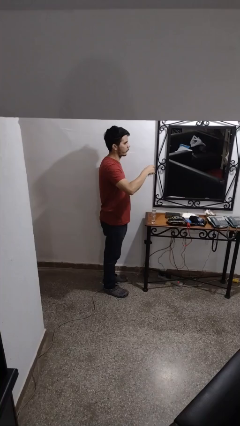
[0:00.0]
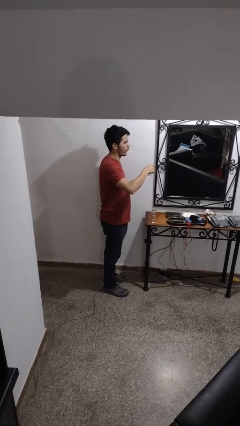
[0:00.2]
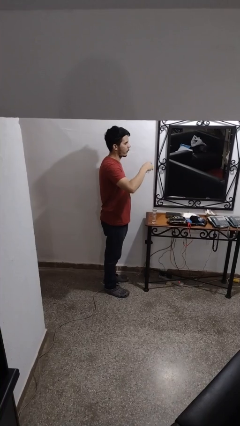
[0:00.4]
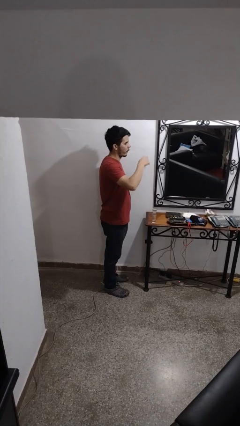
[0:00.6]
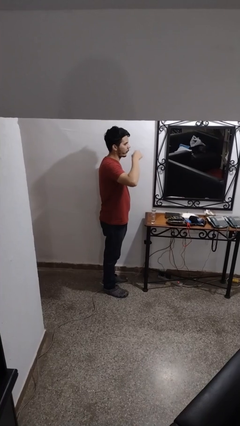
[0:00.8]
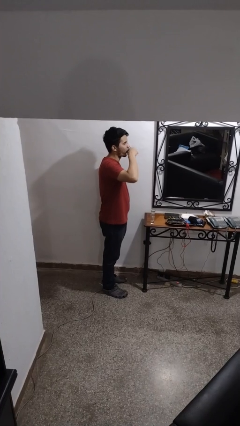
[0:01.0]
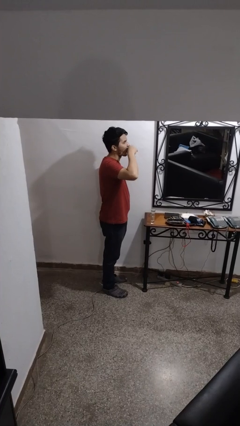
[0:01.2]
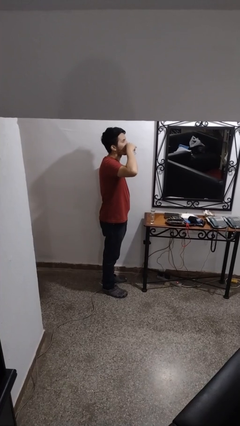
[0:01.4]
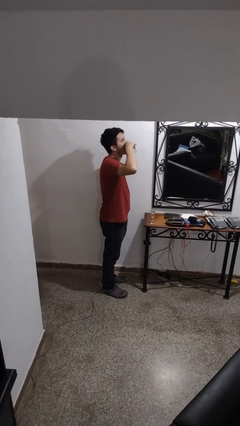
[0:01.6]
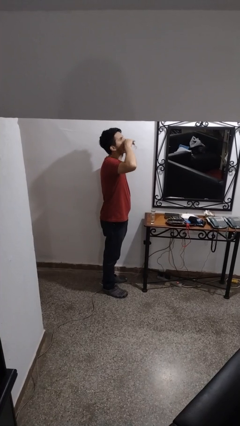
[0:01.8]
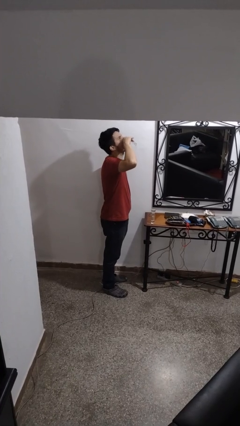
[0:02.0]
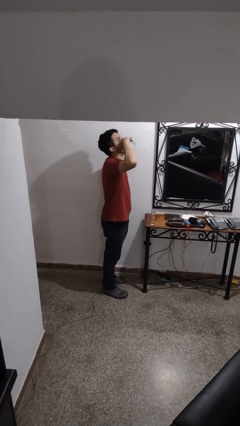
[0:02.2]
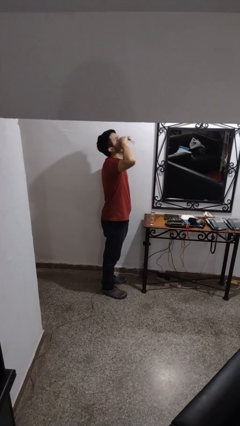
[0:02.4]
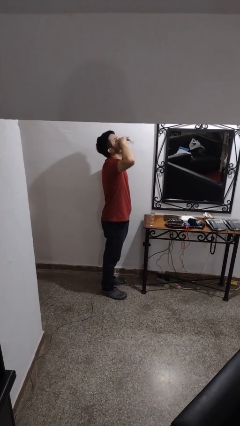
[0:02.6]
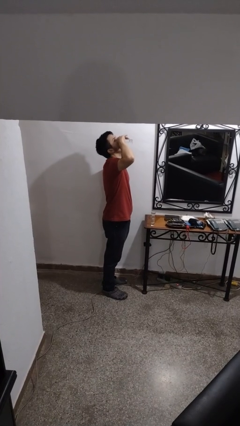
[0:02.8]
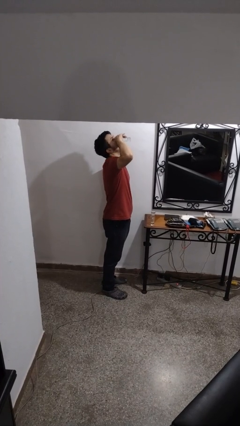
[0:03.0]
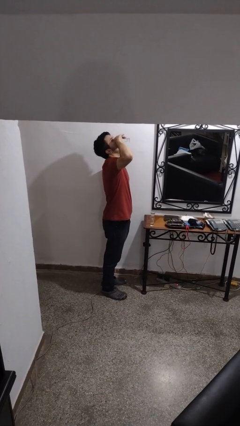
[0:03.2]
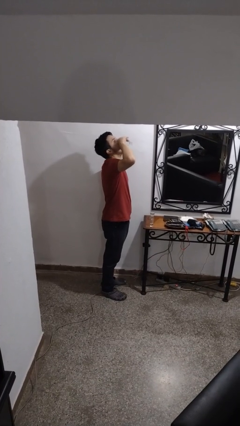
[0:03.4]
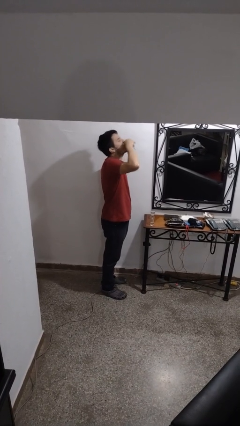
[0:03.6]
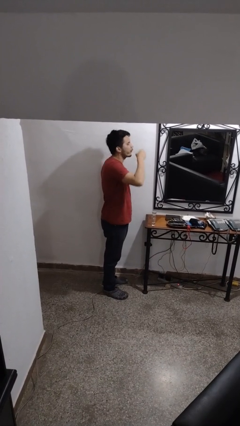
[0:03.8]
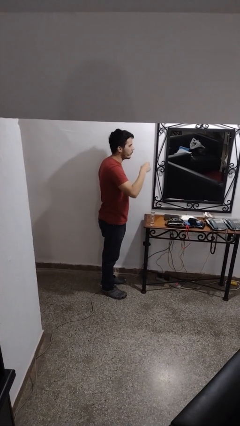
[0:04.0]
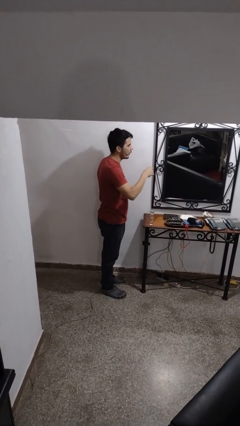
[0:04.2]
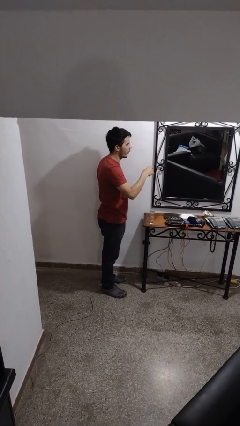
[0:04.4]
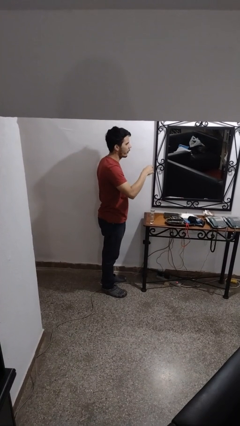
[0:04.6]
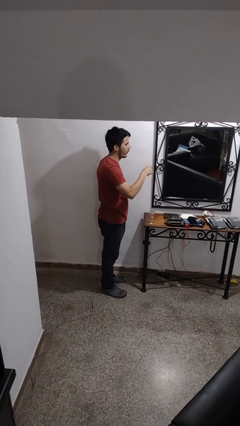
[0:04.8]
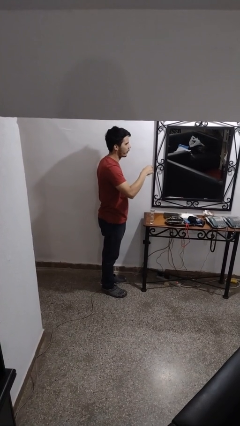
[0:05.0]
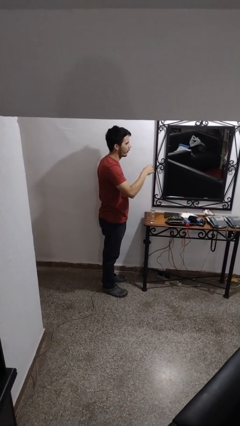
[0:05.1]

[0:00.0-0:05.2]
person drinks from shotglass

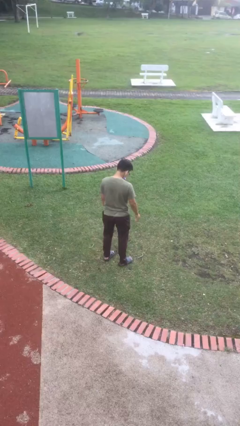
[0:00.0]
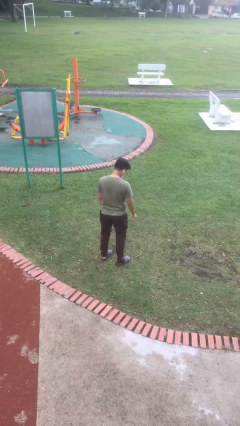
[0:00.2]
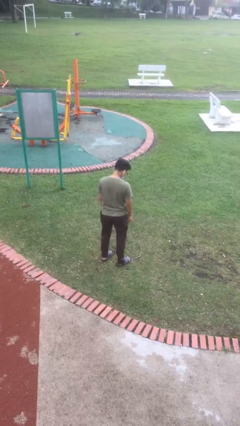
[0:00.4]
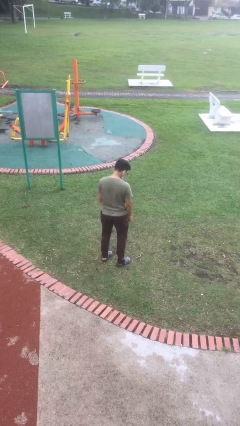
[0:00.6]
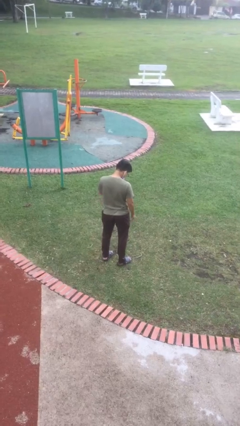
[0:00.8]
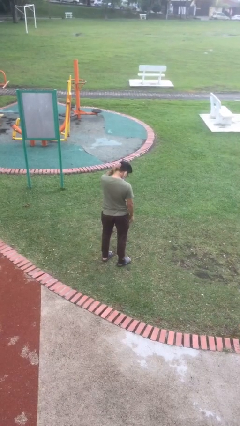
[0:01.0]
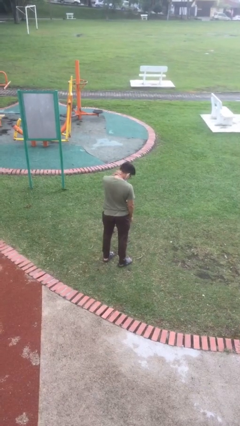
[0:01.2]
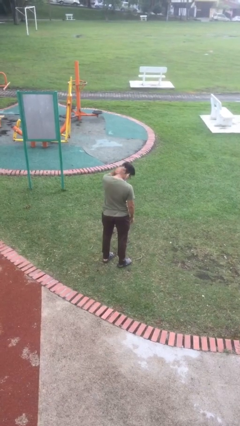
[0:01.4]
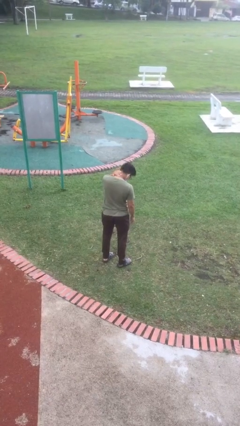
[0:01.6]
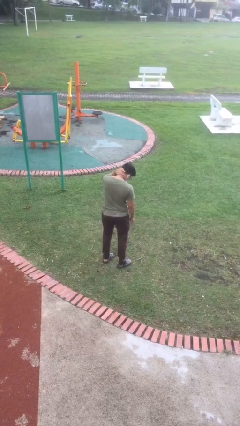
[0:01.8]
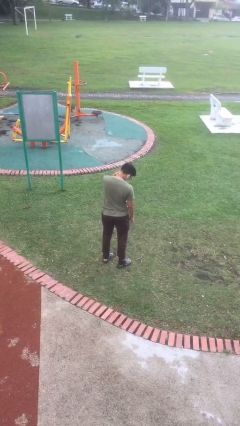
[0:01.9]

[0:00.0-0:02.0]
person rubs neck

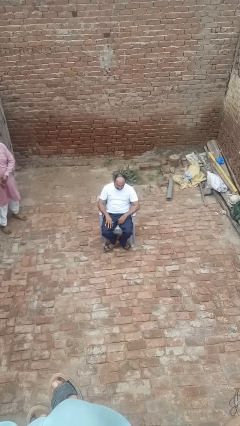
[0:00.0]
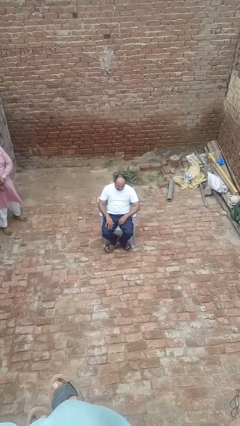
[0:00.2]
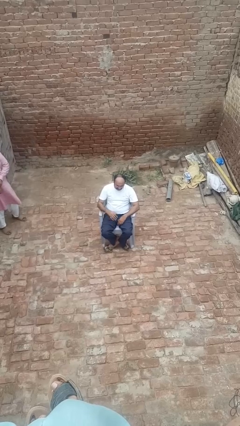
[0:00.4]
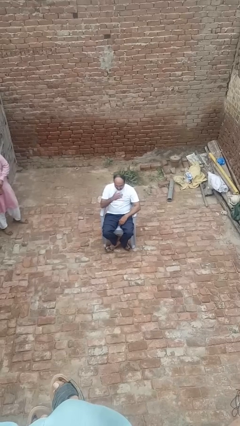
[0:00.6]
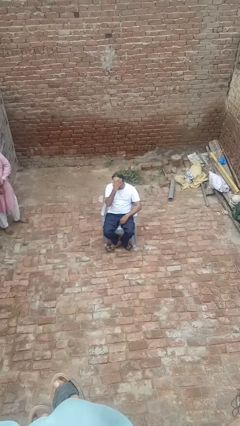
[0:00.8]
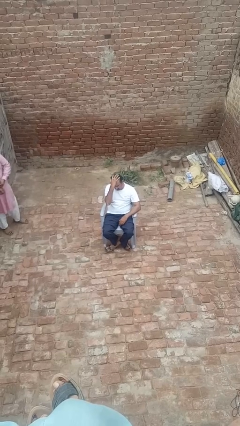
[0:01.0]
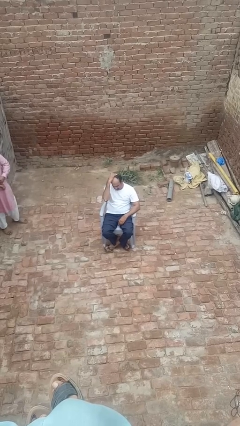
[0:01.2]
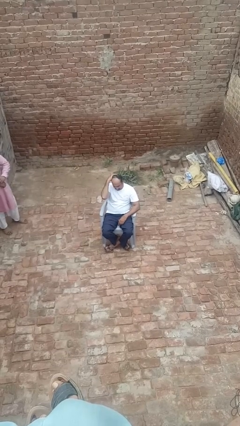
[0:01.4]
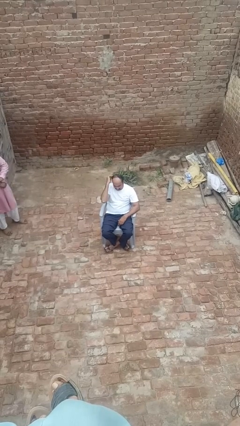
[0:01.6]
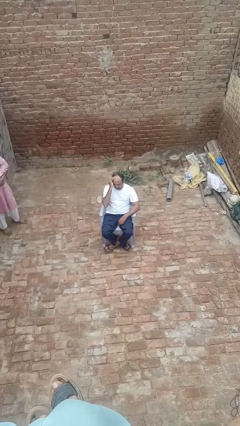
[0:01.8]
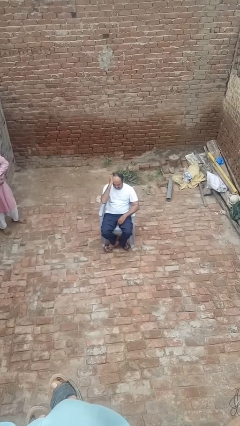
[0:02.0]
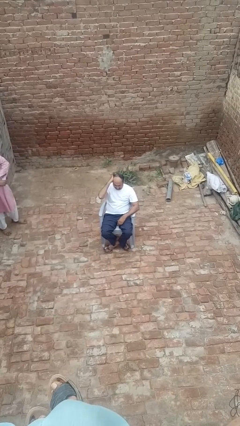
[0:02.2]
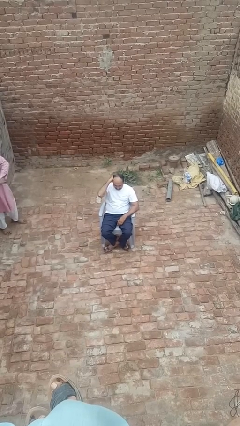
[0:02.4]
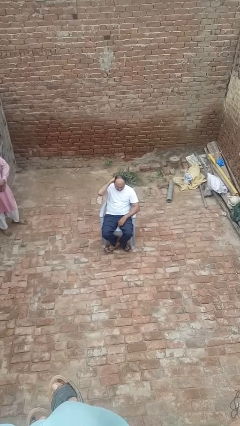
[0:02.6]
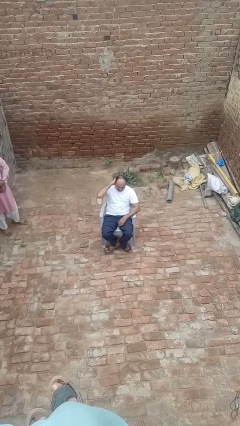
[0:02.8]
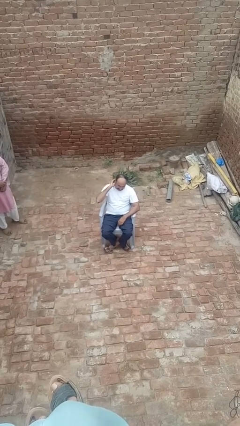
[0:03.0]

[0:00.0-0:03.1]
person strokes hair

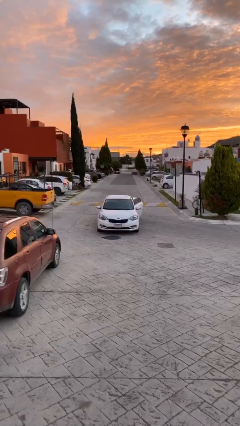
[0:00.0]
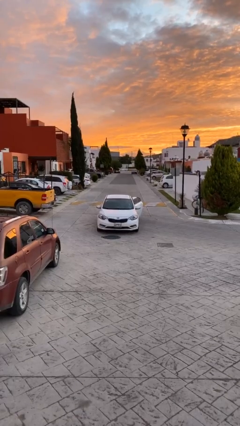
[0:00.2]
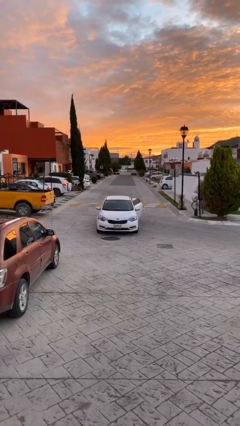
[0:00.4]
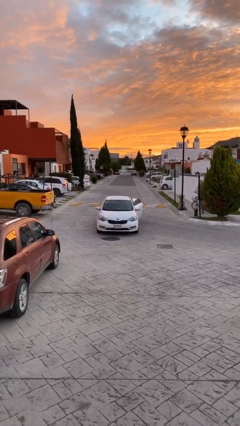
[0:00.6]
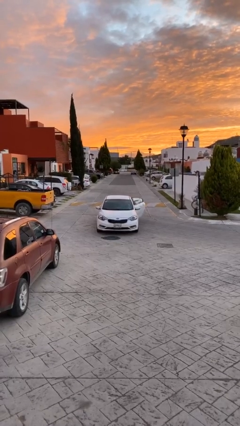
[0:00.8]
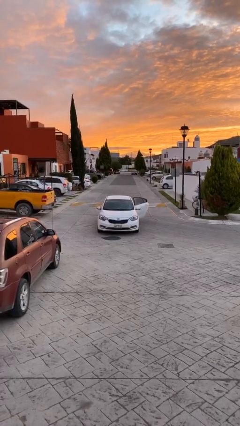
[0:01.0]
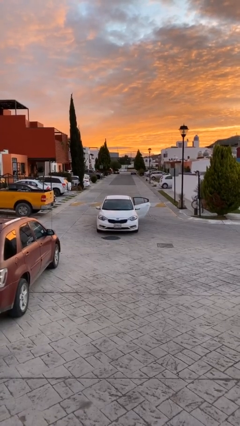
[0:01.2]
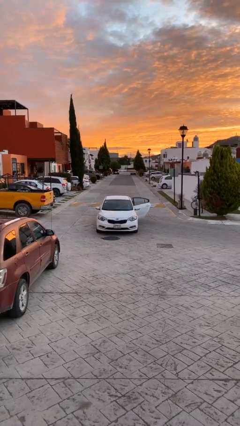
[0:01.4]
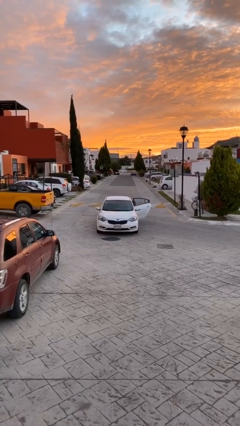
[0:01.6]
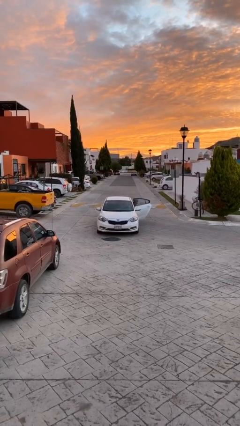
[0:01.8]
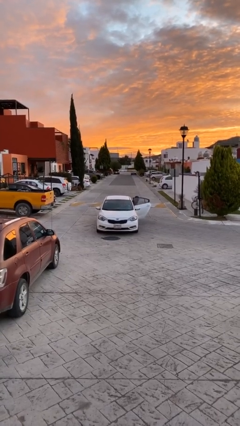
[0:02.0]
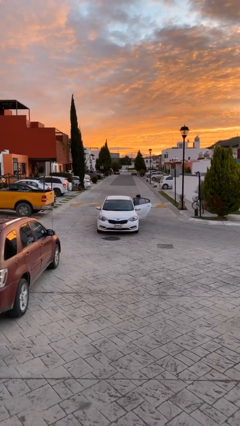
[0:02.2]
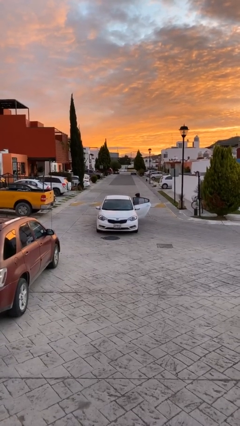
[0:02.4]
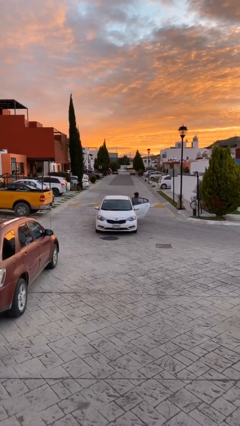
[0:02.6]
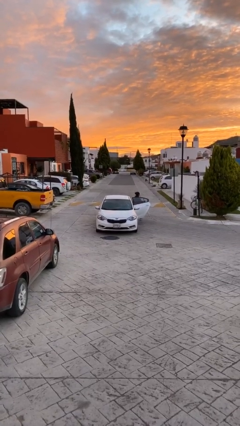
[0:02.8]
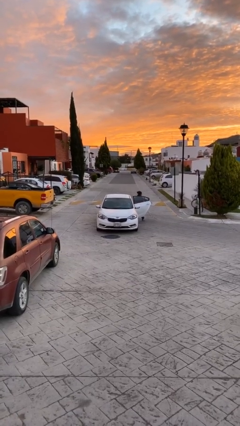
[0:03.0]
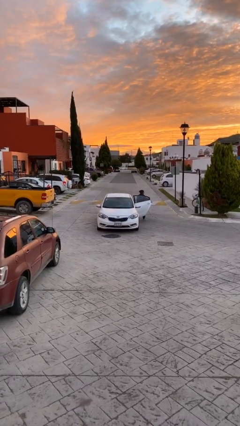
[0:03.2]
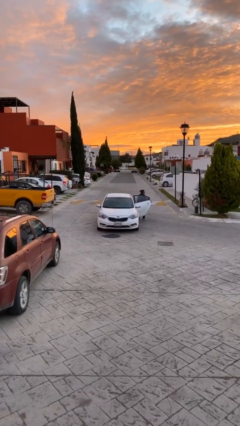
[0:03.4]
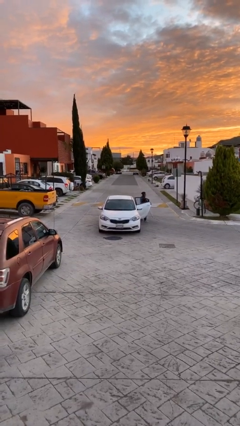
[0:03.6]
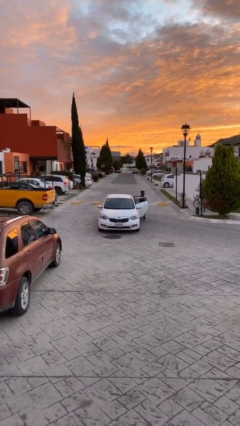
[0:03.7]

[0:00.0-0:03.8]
car drops off person

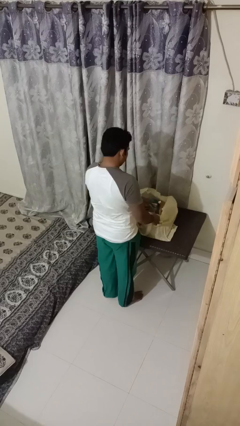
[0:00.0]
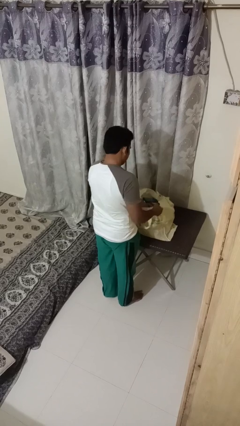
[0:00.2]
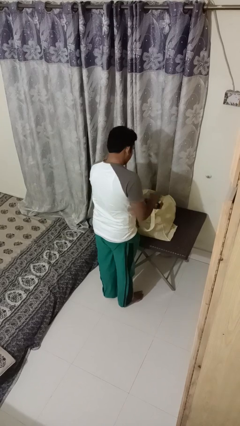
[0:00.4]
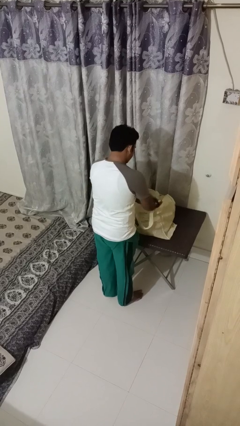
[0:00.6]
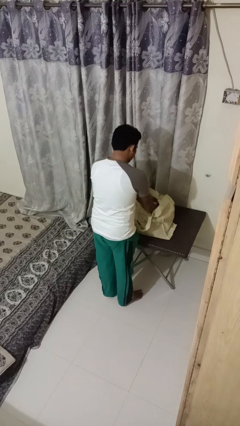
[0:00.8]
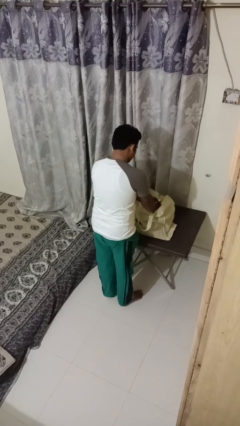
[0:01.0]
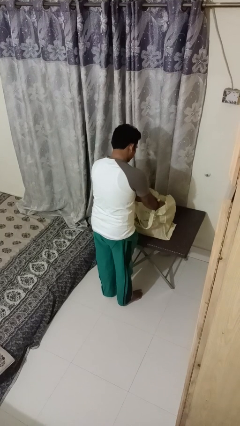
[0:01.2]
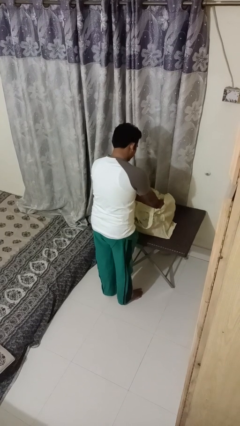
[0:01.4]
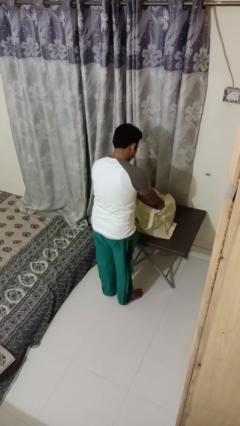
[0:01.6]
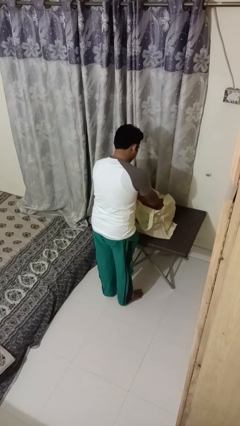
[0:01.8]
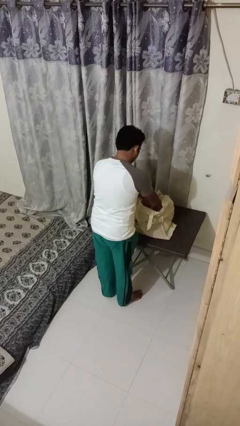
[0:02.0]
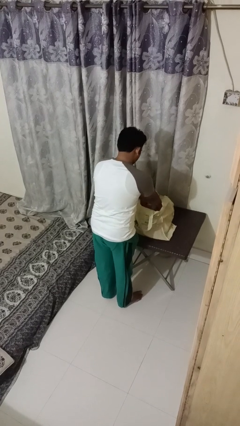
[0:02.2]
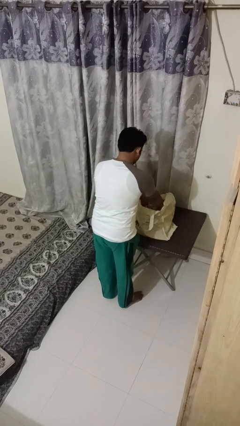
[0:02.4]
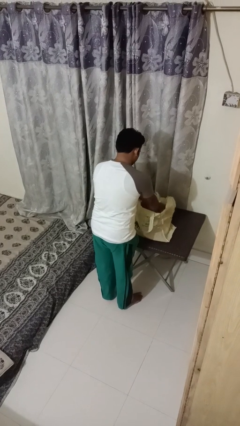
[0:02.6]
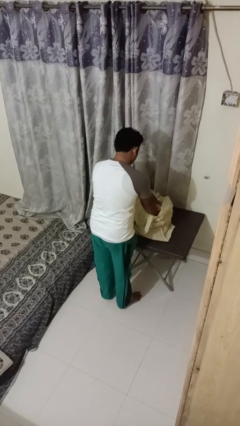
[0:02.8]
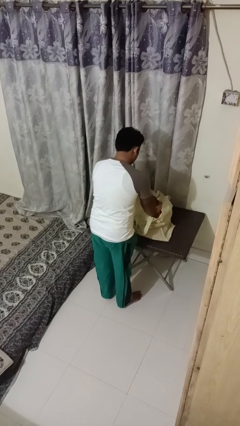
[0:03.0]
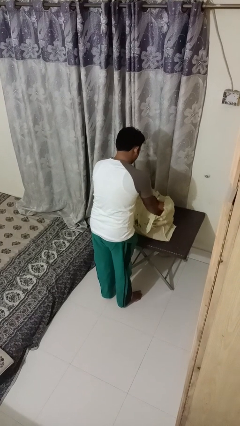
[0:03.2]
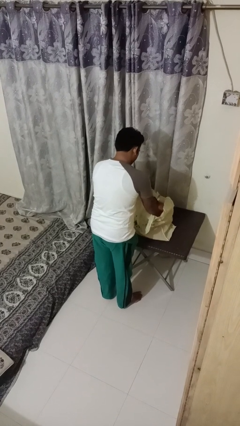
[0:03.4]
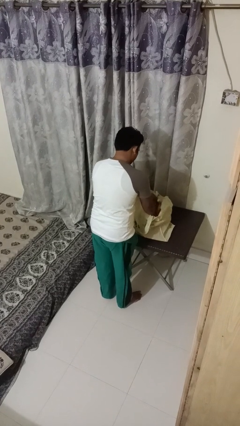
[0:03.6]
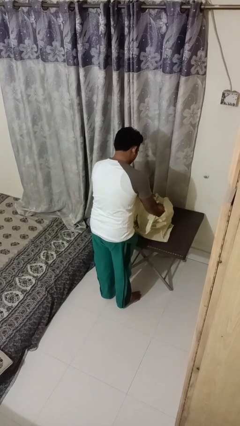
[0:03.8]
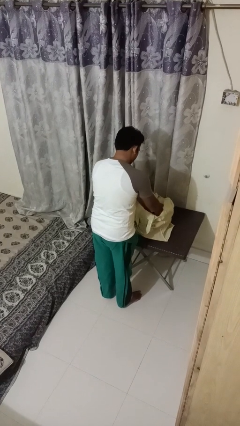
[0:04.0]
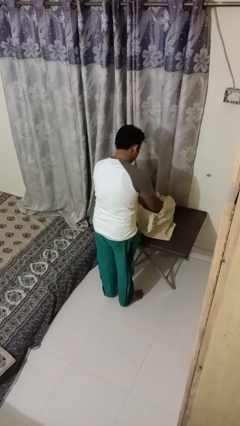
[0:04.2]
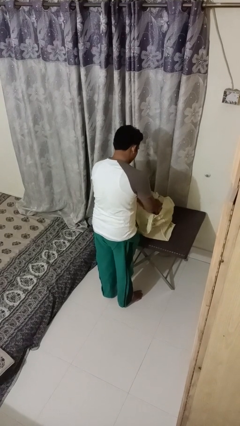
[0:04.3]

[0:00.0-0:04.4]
person searches in bag
